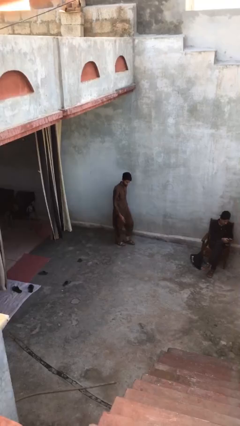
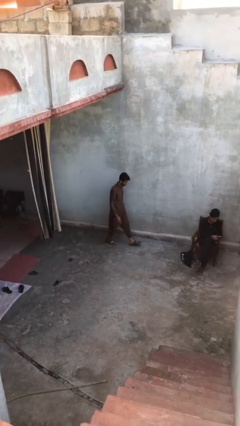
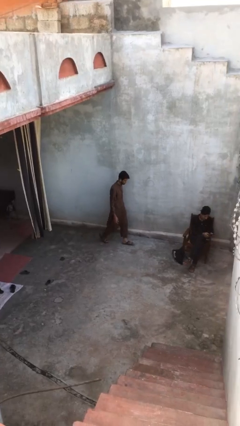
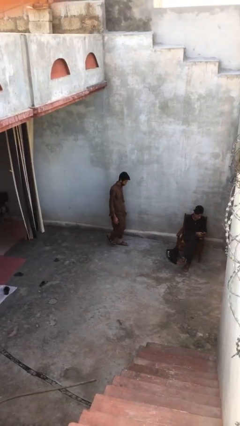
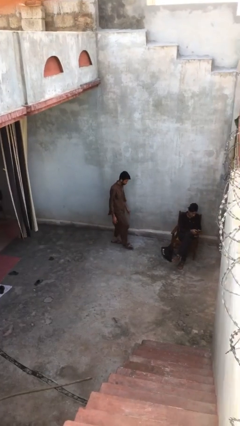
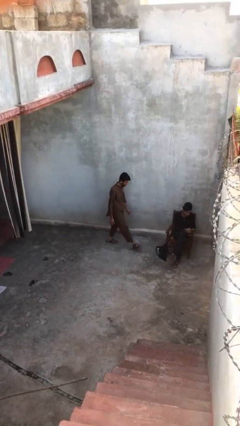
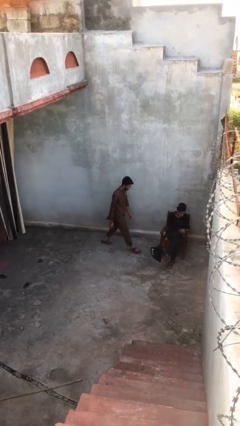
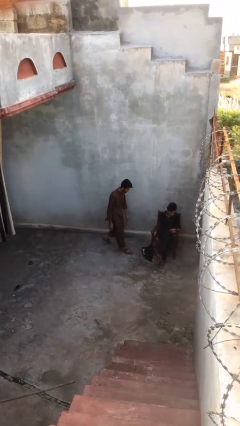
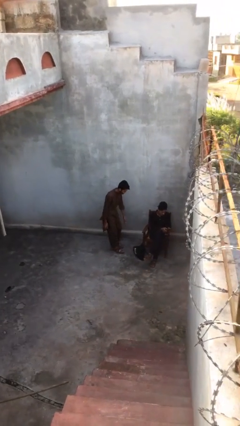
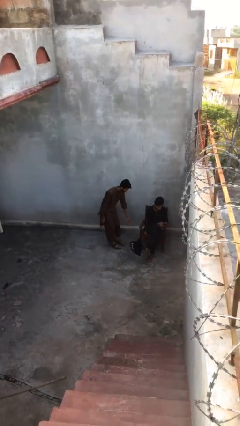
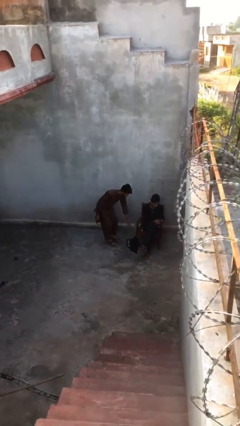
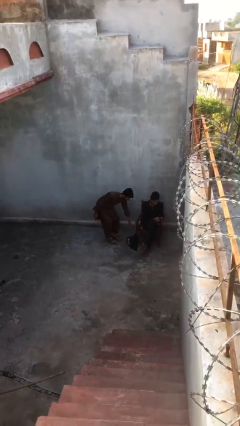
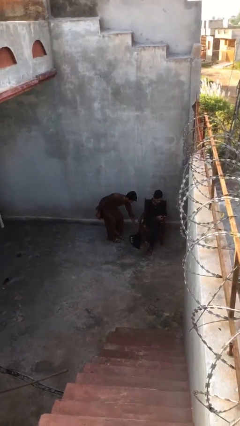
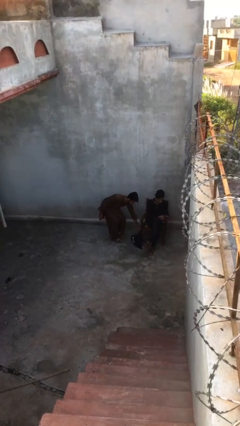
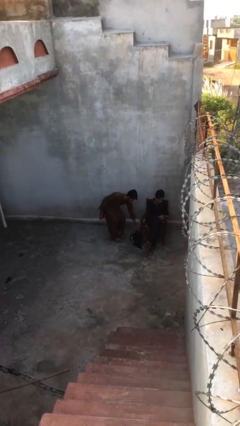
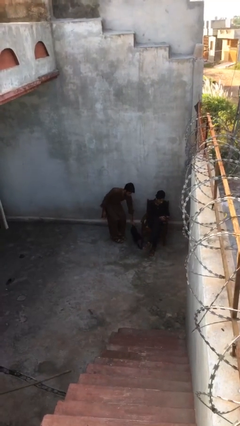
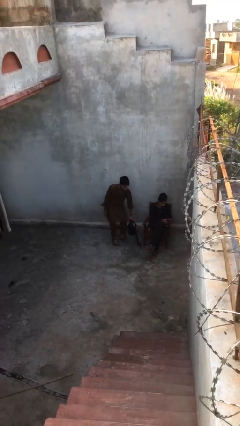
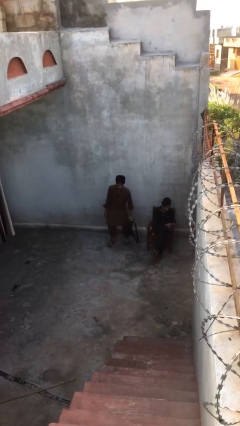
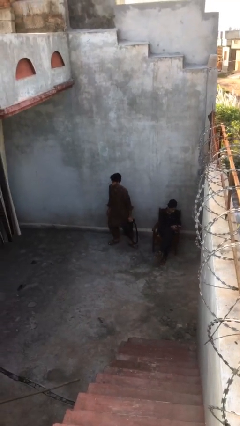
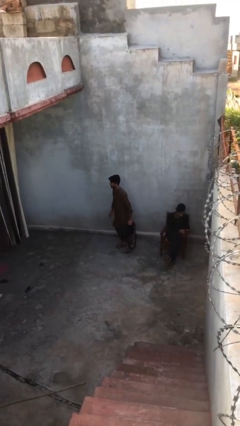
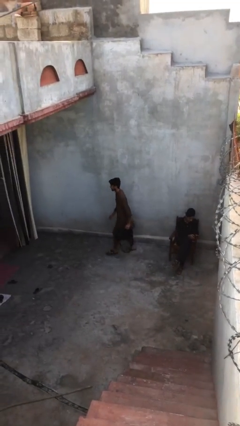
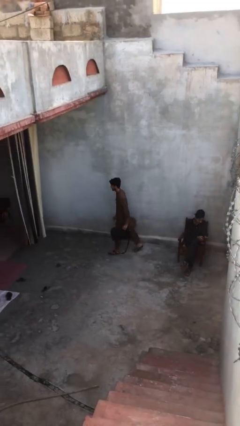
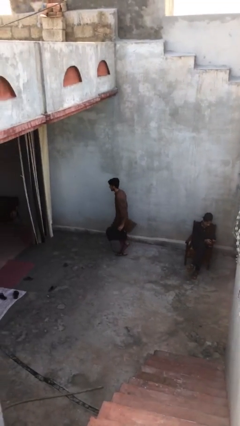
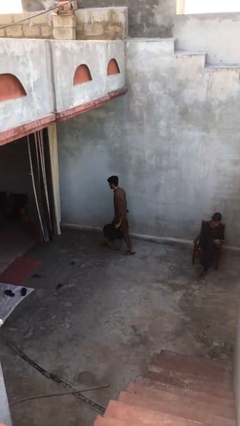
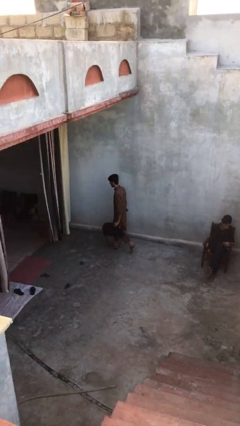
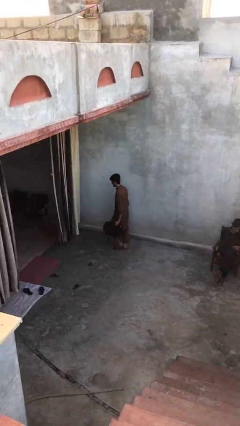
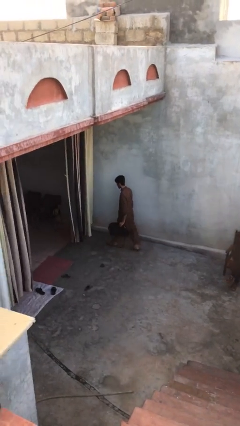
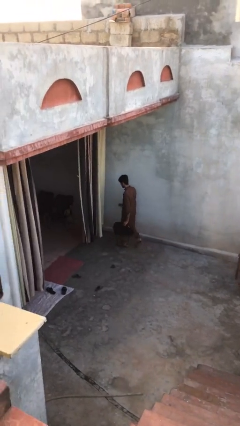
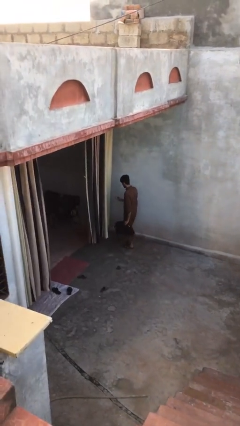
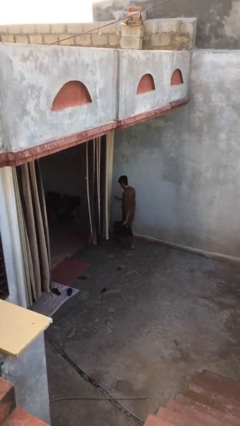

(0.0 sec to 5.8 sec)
person steals object from person

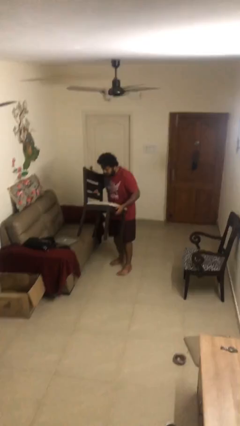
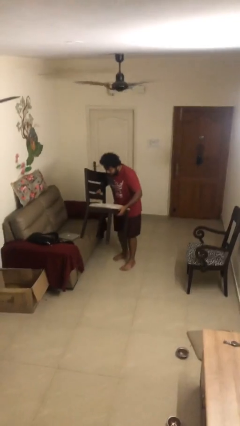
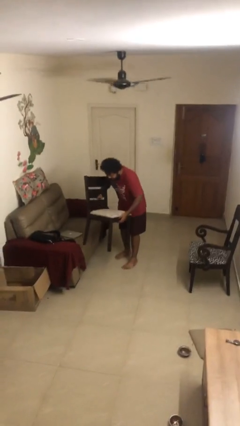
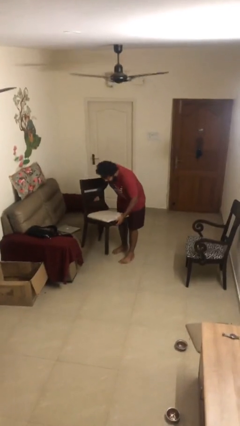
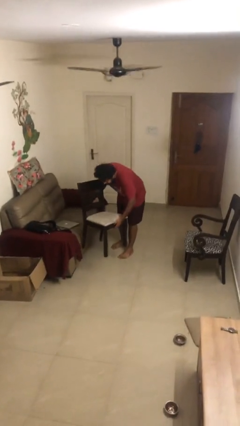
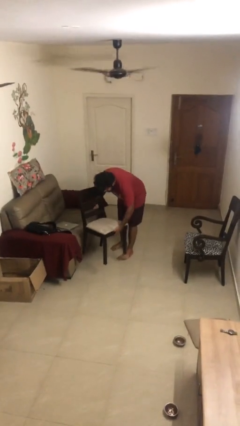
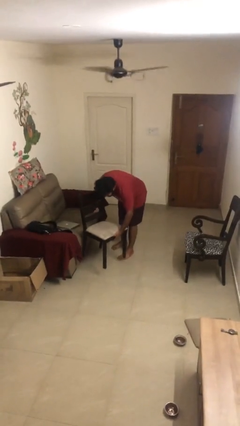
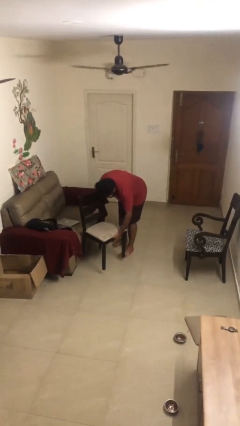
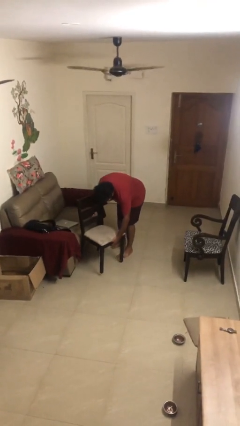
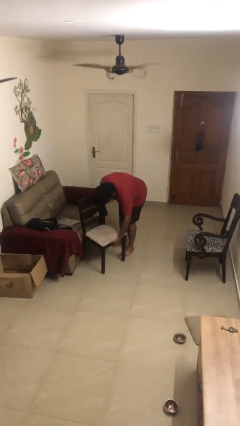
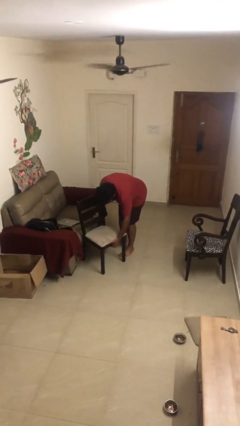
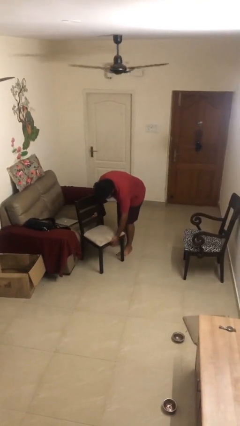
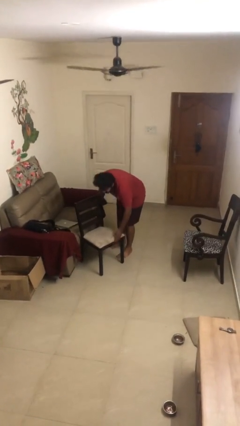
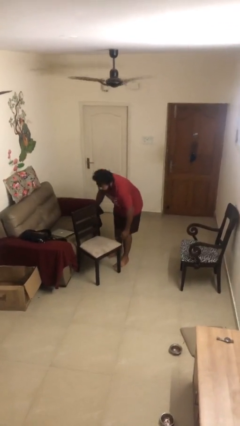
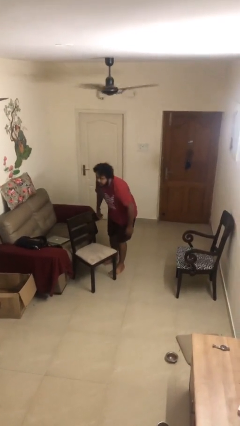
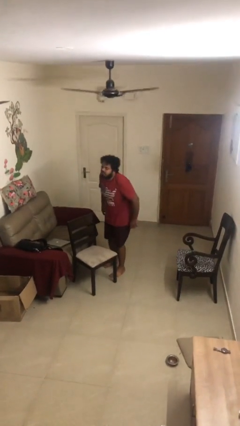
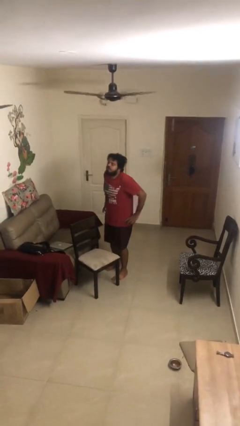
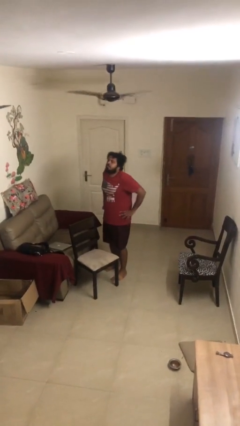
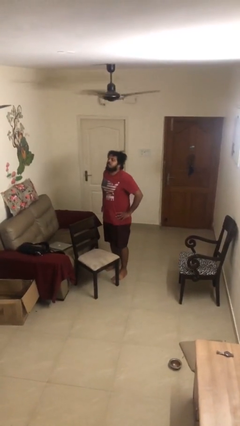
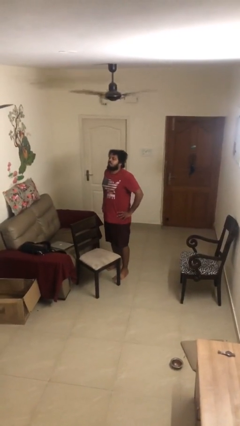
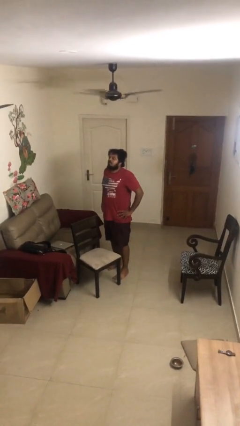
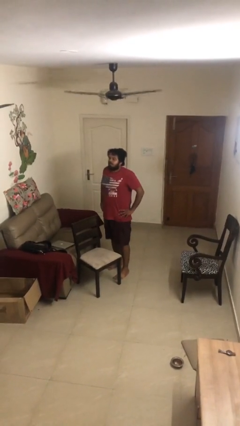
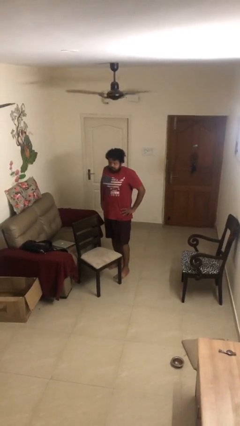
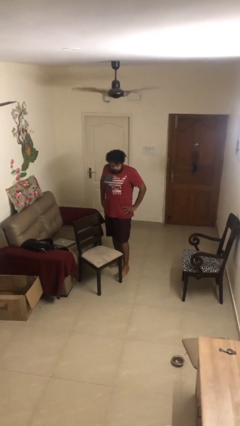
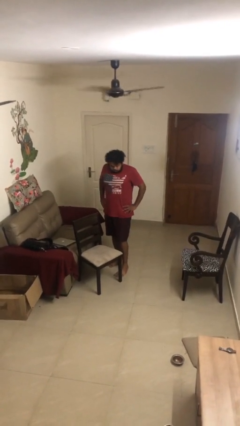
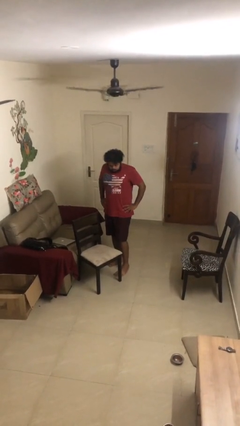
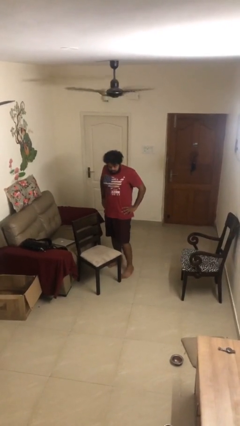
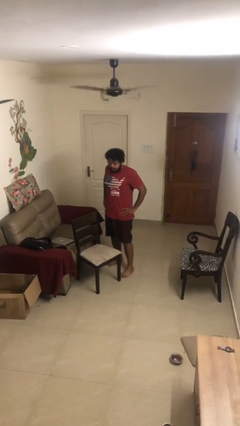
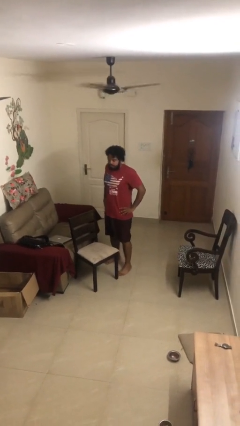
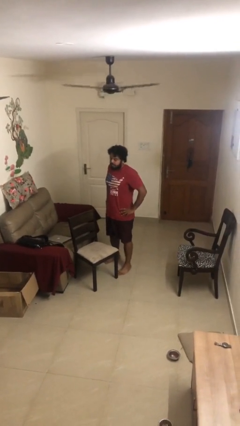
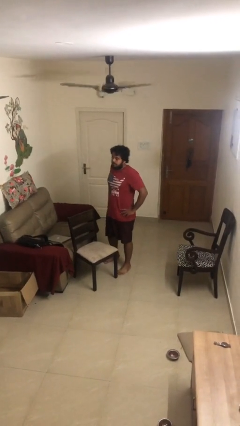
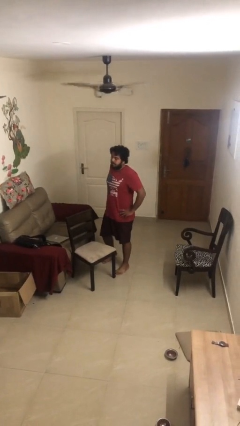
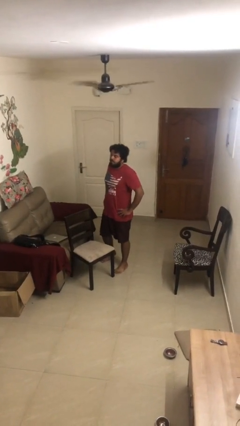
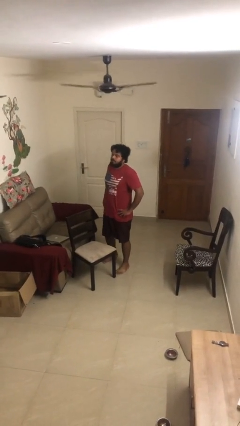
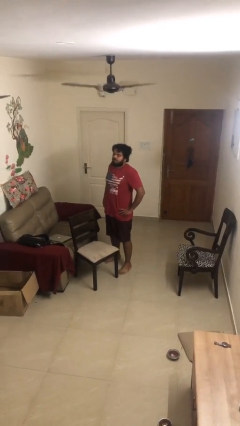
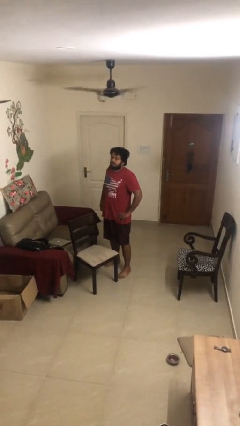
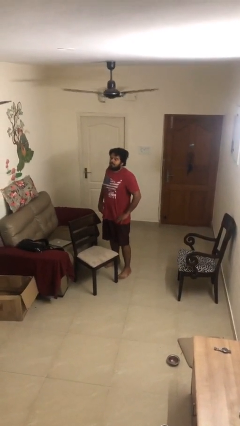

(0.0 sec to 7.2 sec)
person puts down object on floor

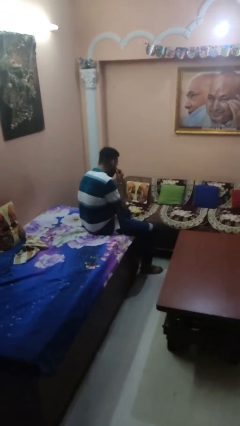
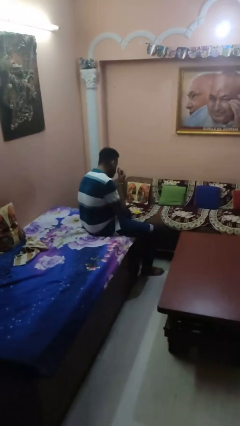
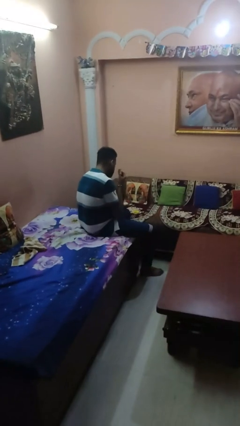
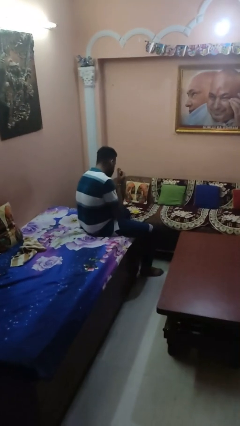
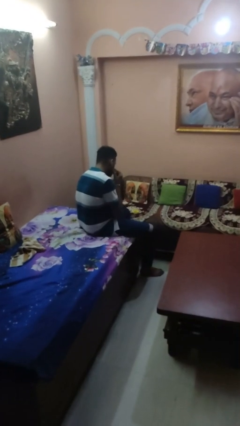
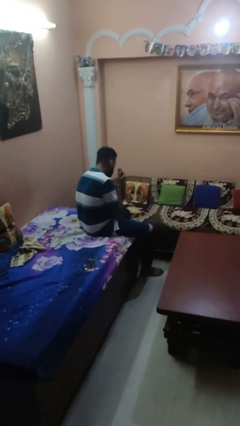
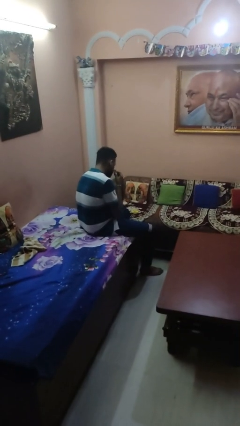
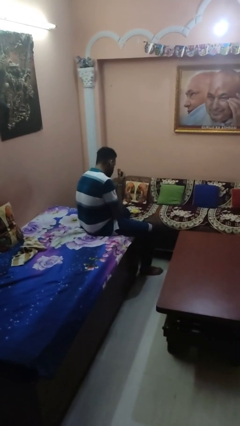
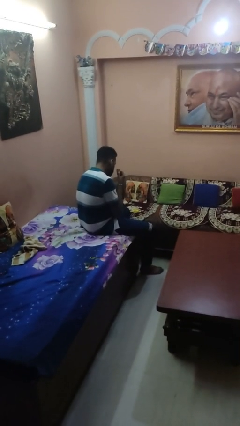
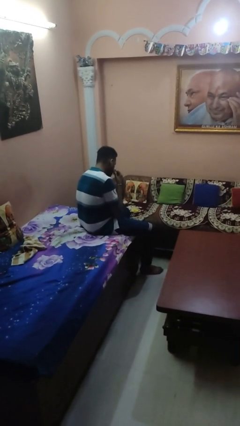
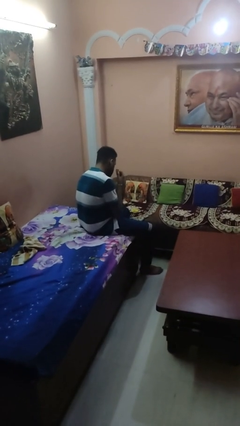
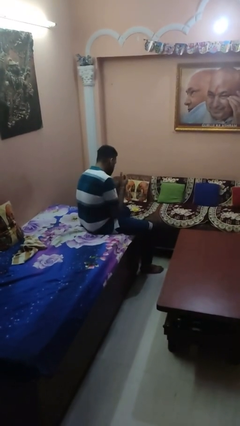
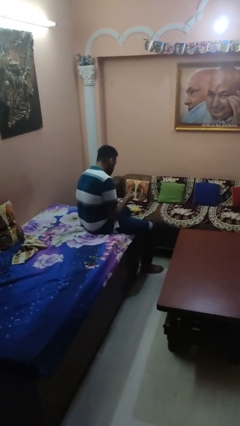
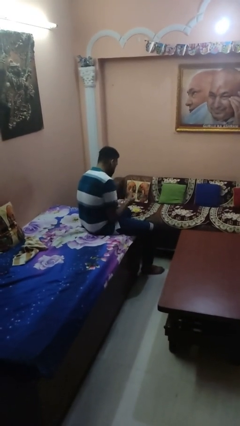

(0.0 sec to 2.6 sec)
person applies foundation makeup

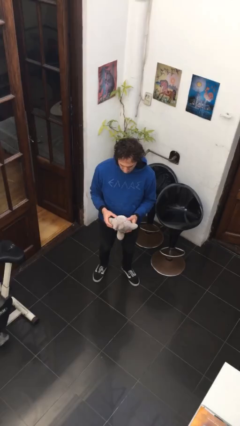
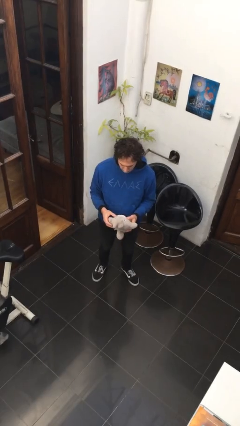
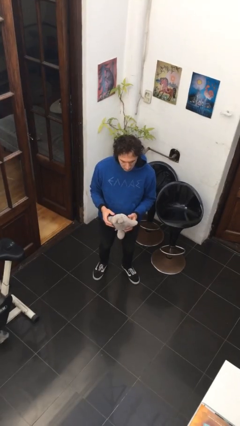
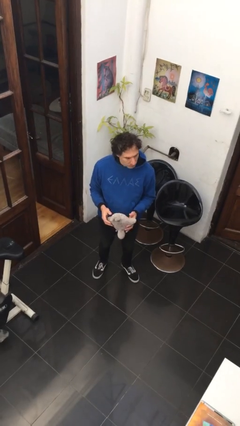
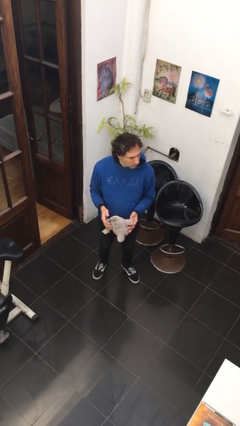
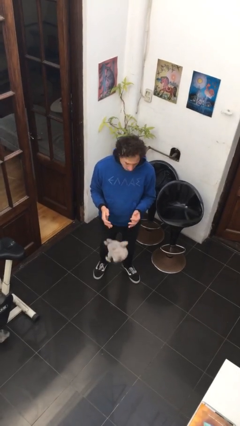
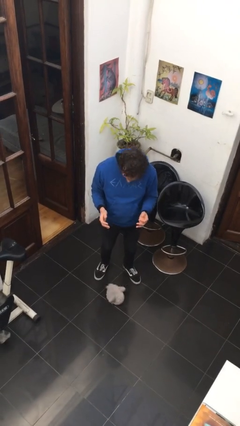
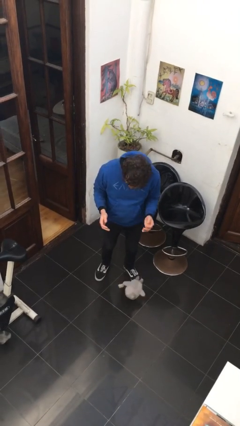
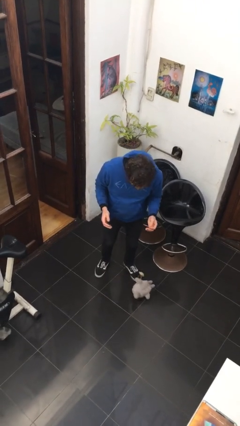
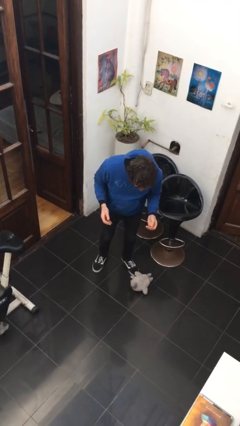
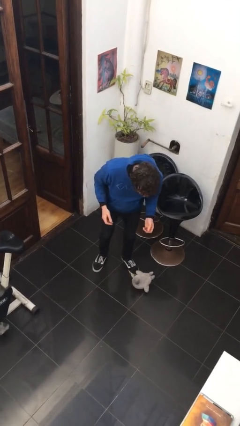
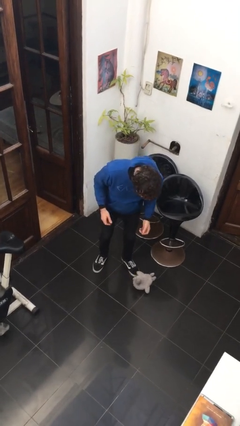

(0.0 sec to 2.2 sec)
person drops object
